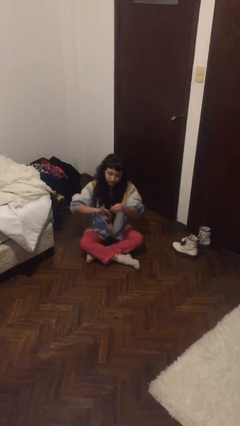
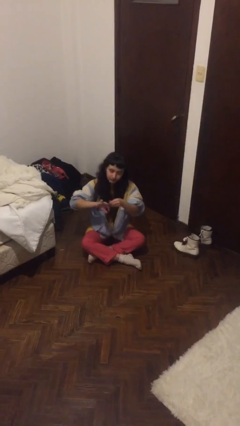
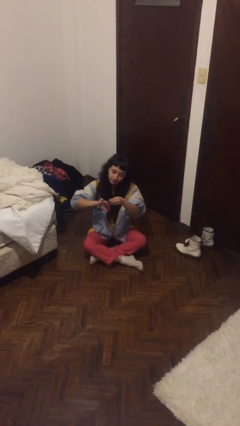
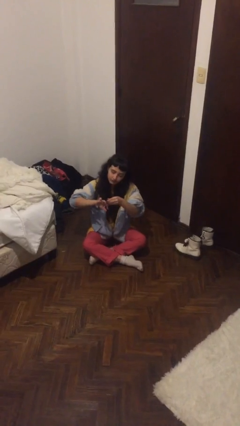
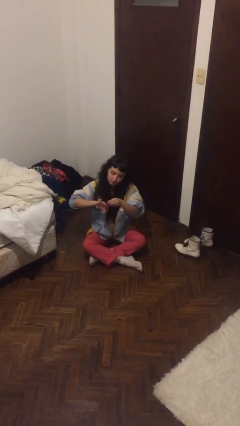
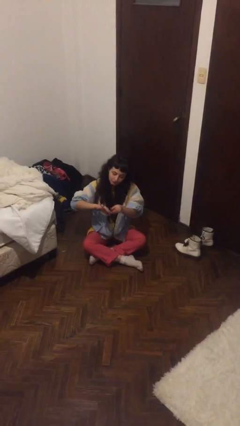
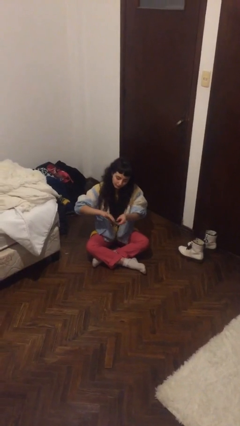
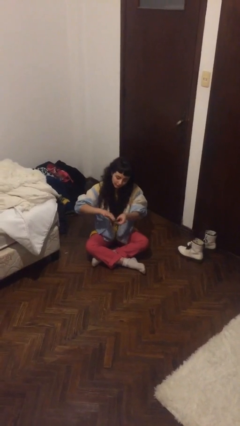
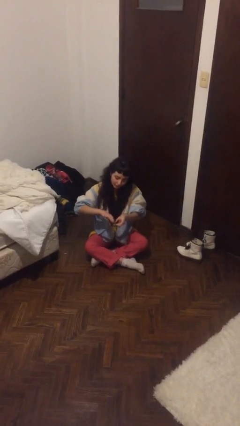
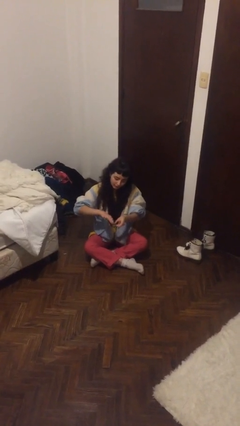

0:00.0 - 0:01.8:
person clips fingernails

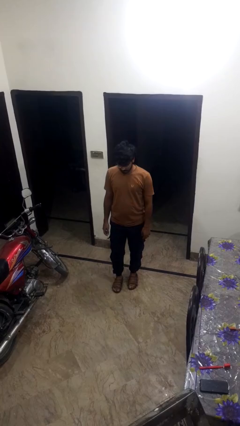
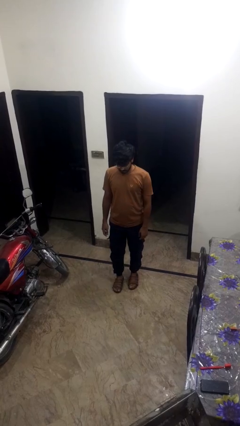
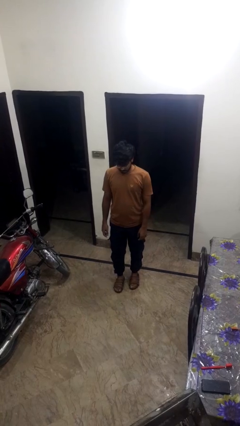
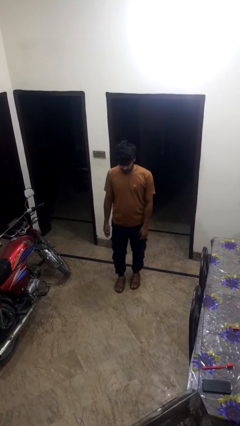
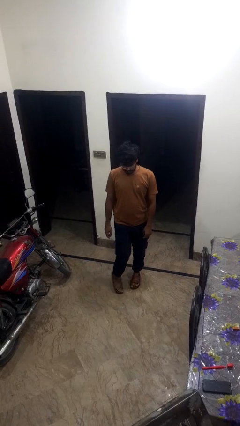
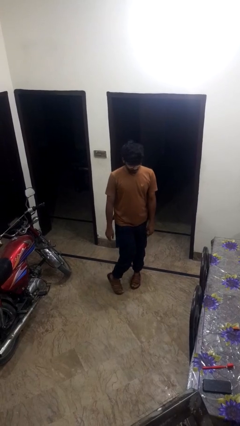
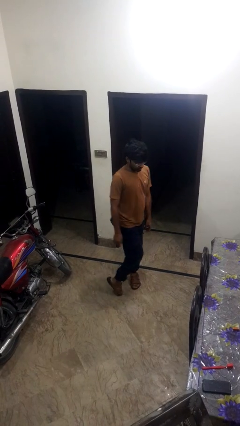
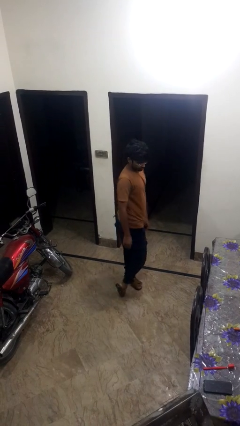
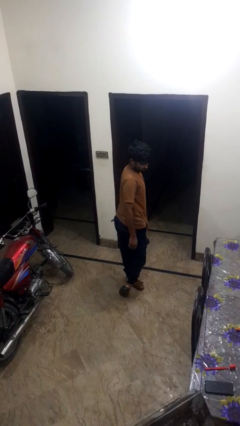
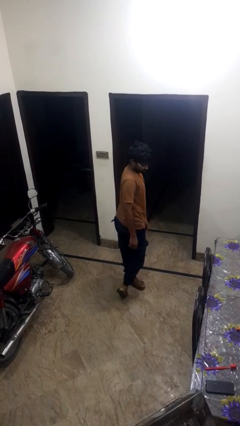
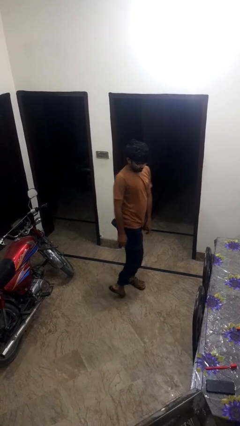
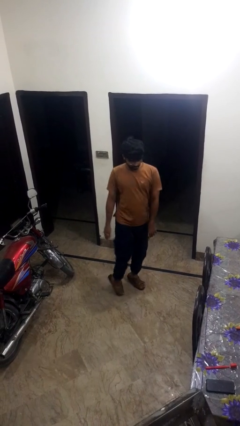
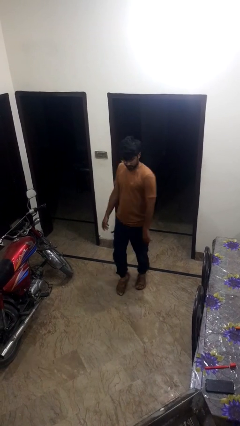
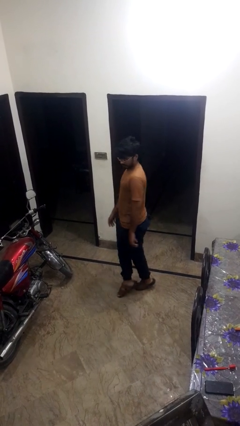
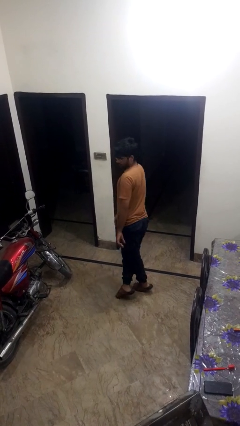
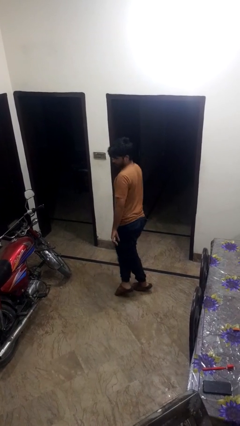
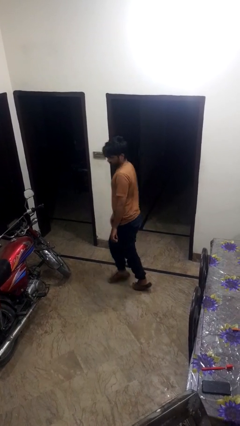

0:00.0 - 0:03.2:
person twirls

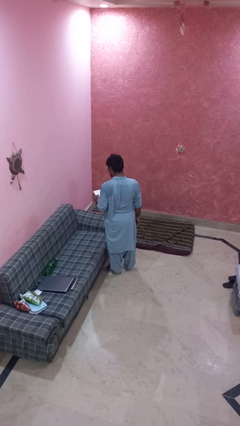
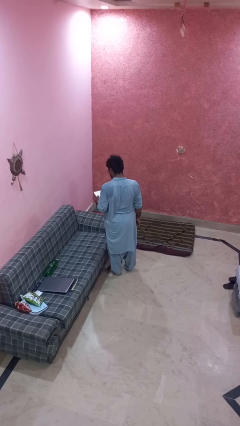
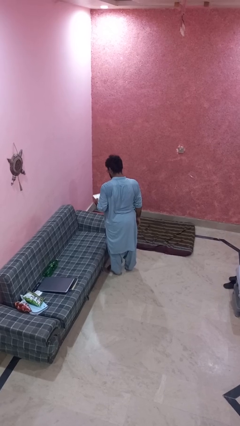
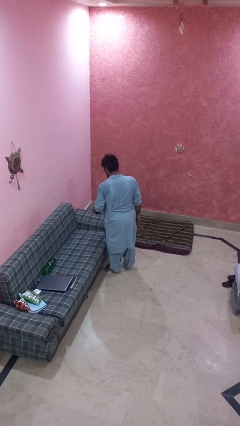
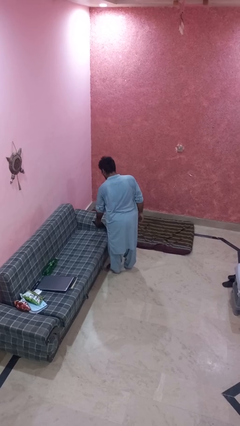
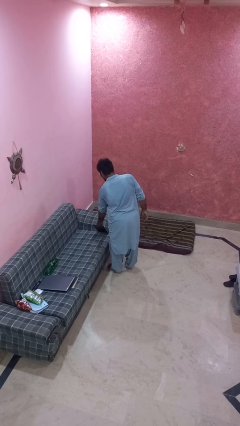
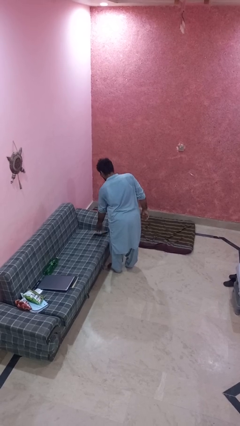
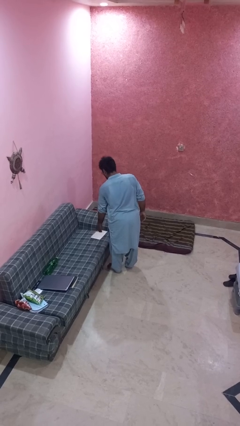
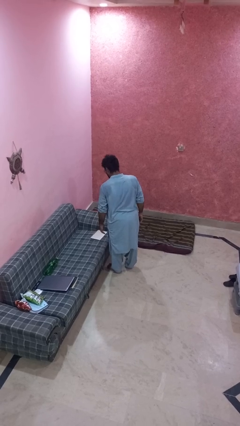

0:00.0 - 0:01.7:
person puts down object on couch

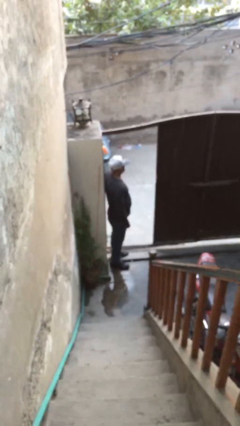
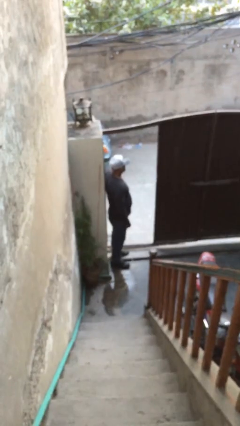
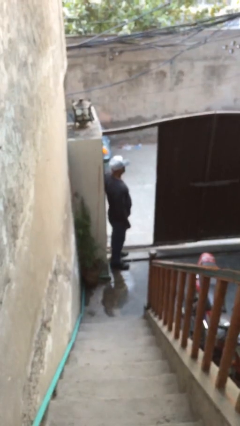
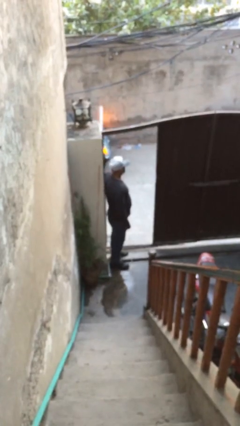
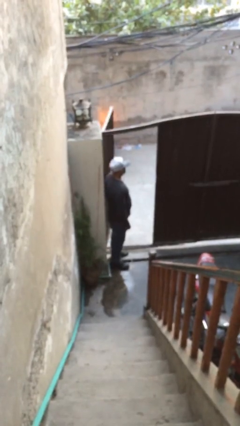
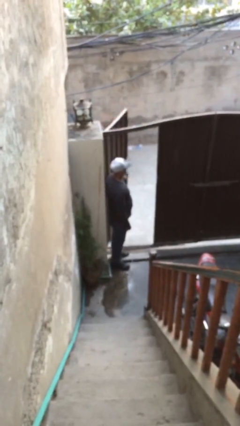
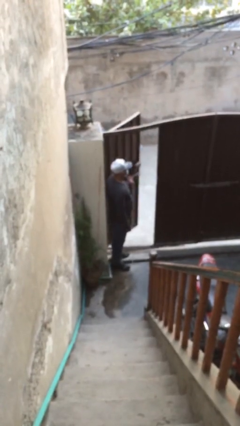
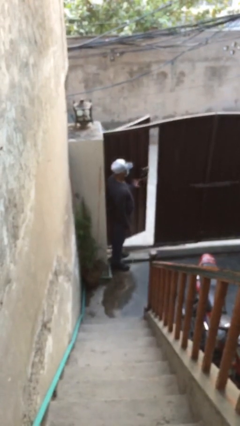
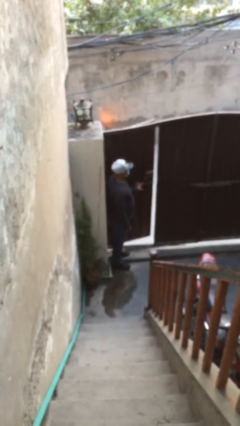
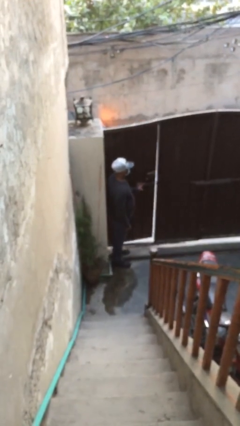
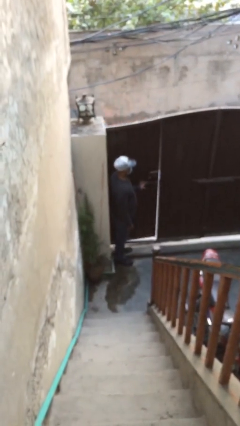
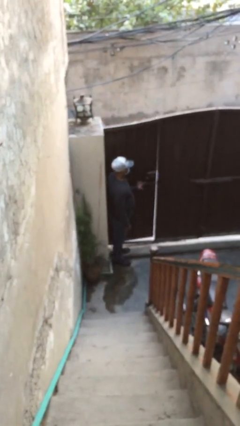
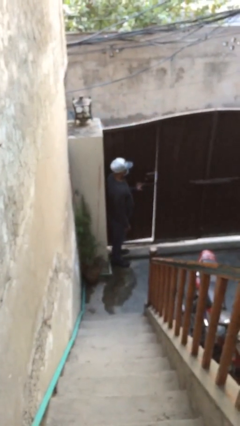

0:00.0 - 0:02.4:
person closes facility door

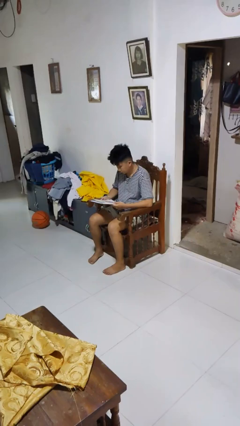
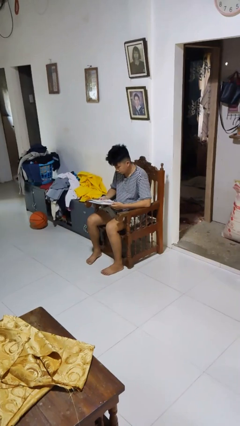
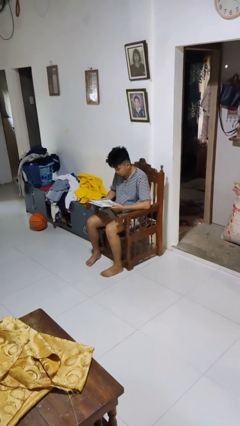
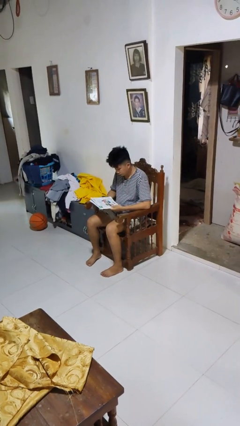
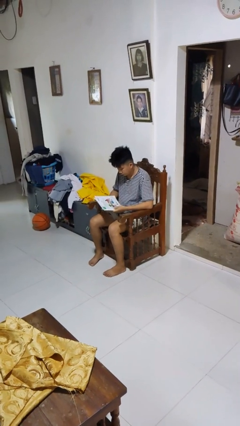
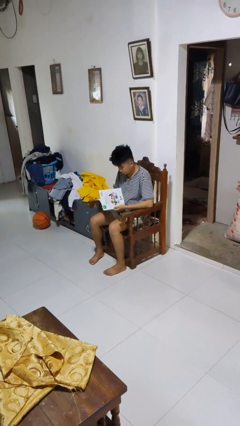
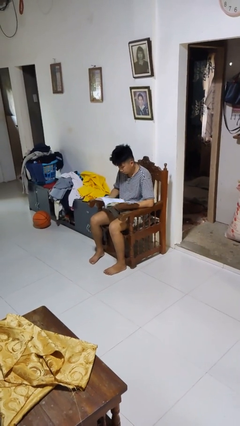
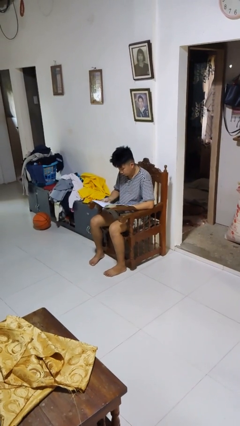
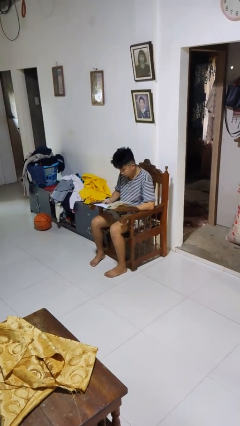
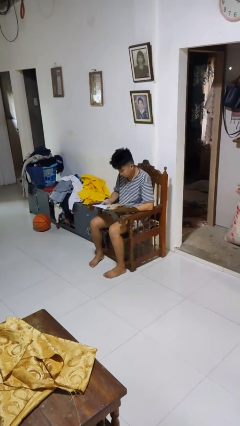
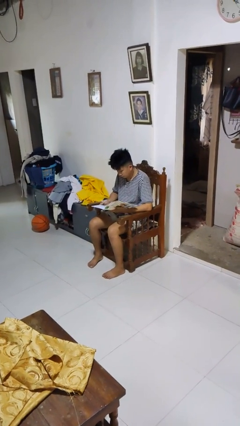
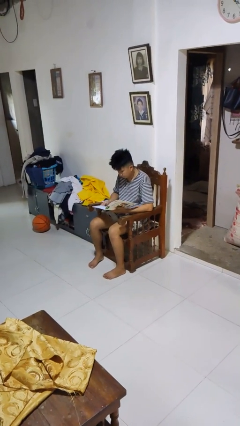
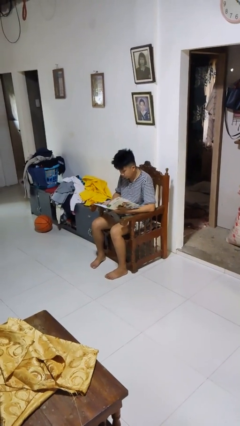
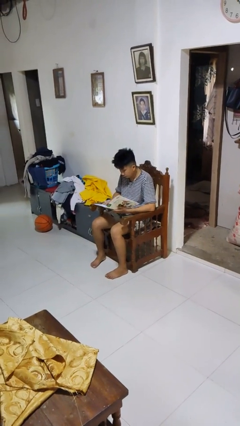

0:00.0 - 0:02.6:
person reads magazine

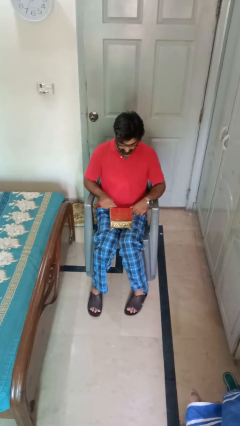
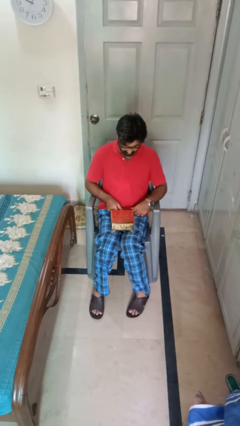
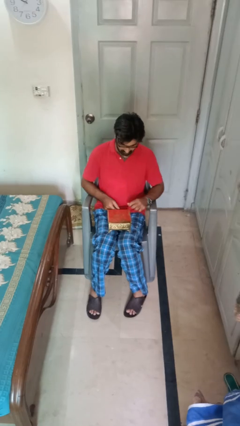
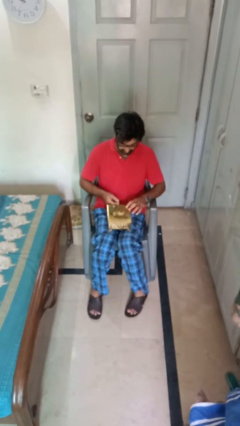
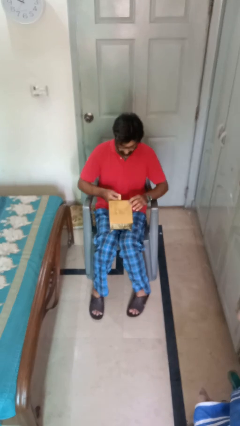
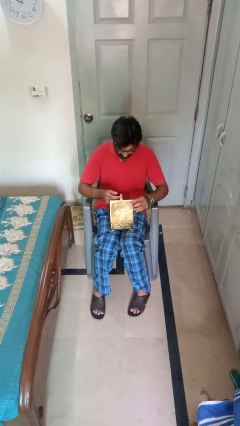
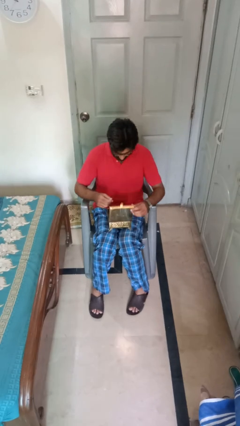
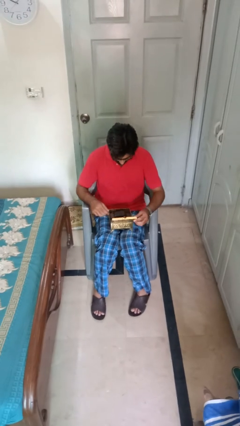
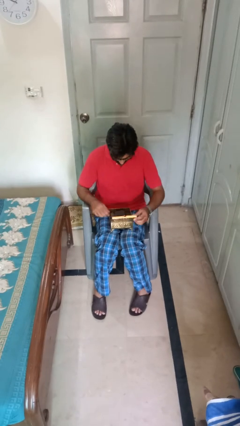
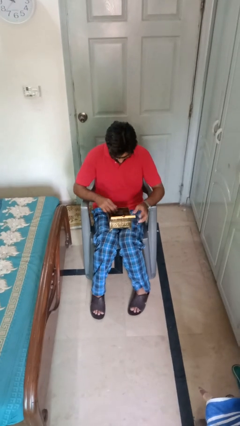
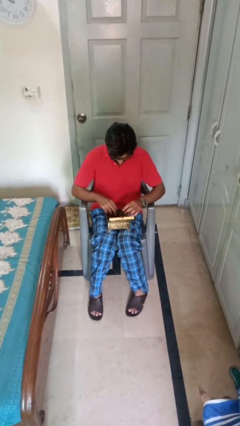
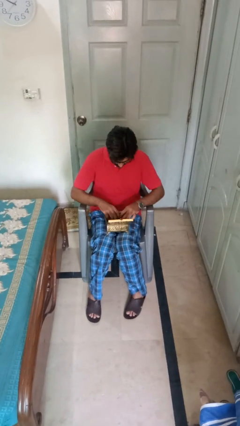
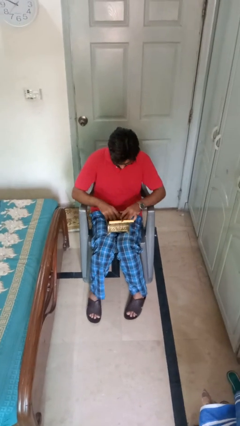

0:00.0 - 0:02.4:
person opens jewelry box

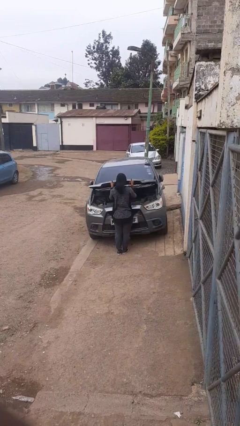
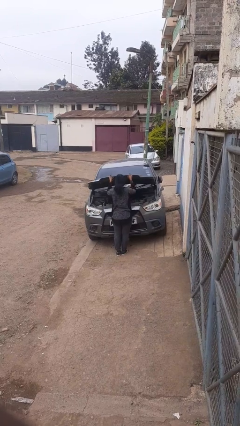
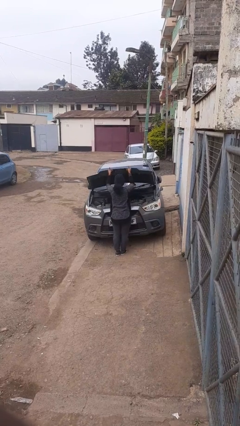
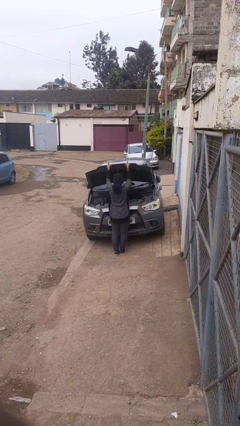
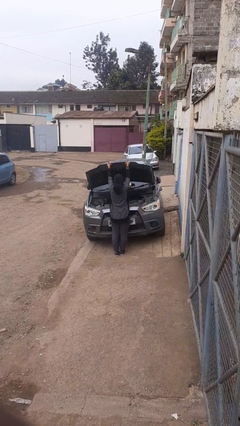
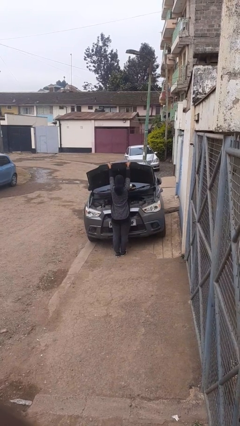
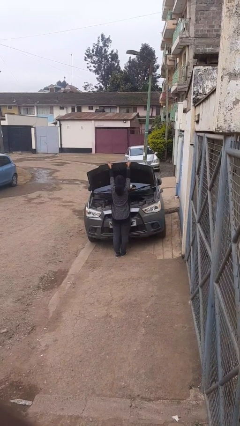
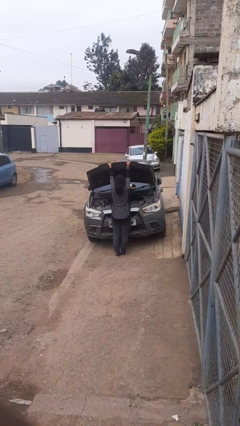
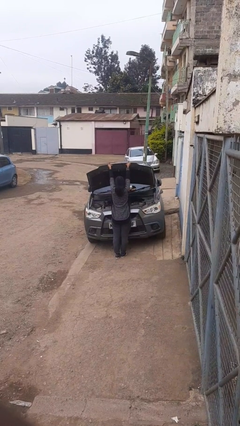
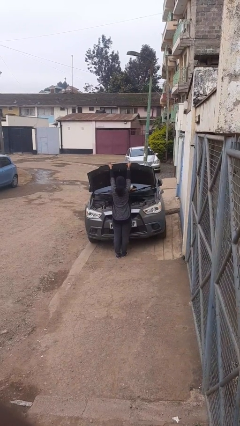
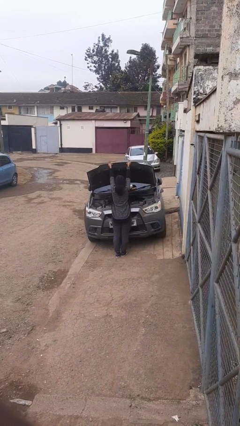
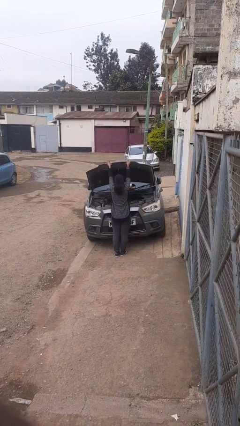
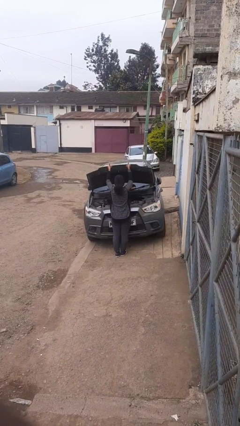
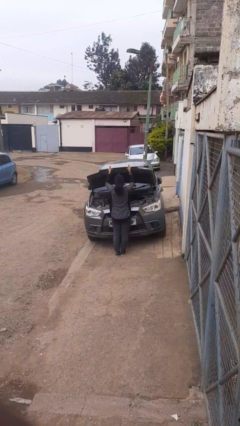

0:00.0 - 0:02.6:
person opens car hood

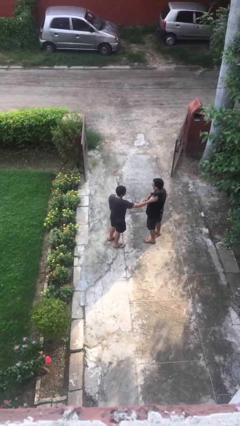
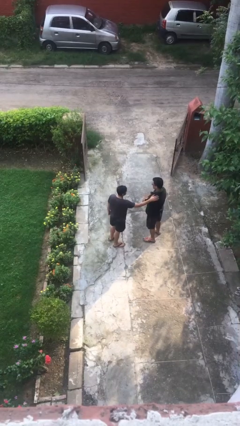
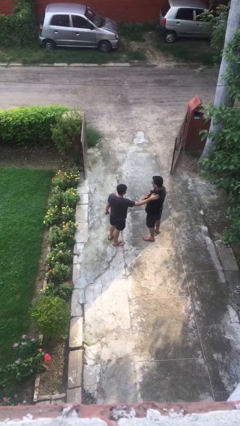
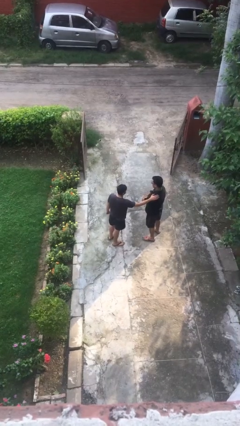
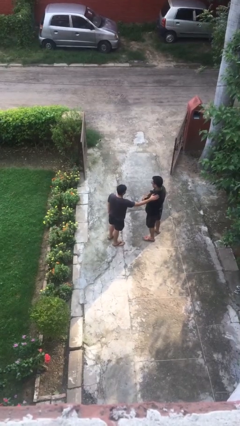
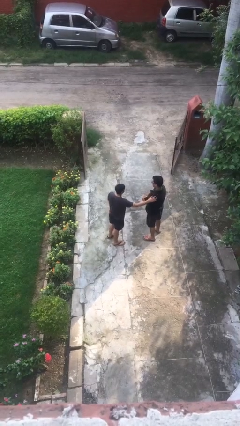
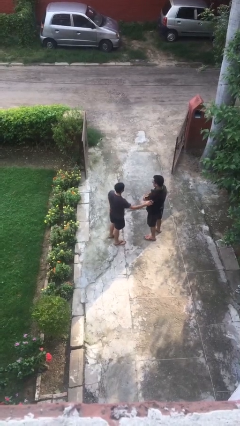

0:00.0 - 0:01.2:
person pounds shoulders of person
